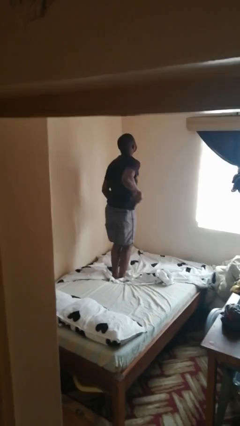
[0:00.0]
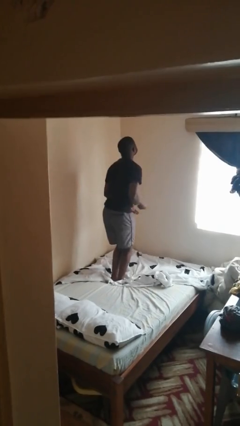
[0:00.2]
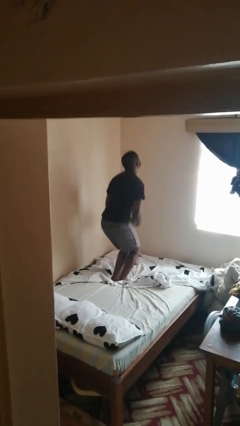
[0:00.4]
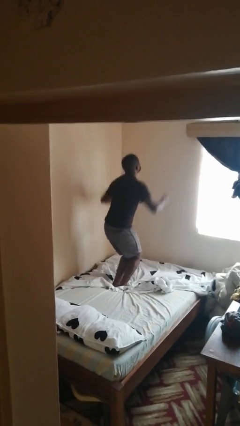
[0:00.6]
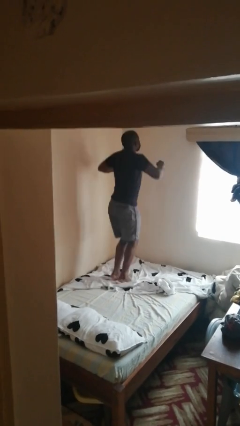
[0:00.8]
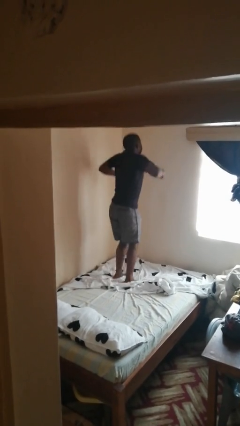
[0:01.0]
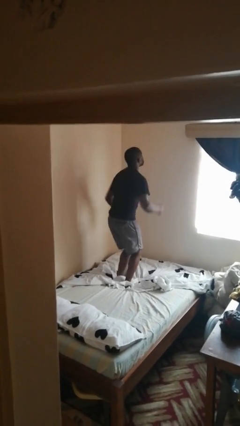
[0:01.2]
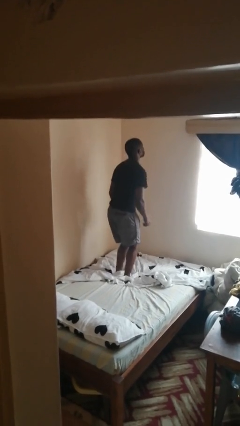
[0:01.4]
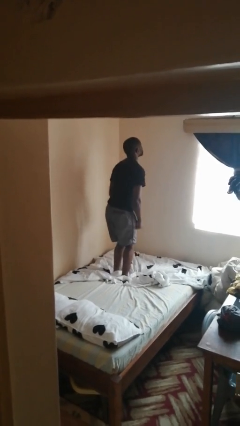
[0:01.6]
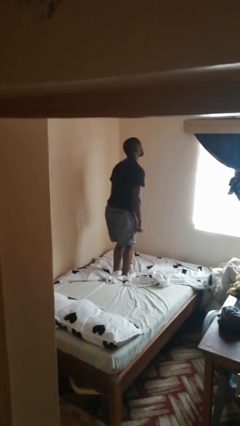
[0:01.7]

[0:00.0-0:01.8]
person jumps on bed

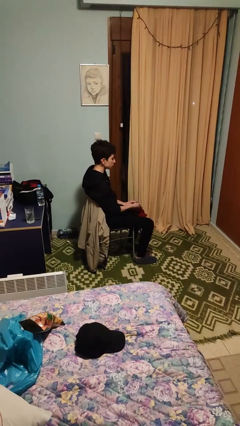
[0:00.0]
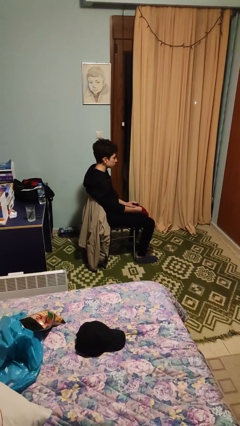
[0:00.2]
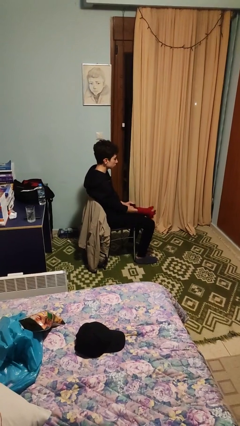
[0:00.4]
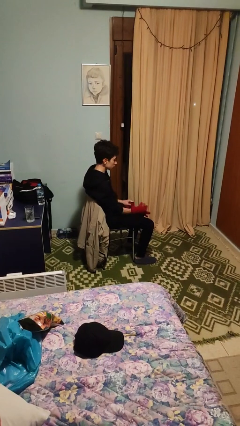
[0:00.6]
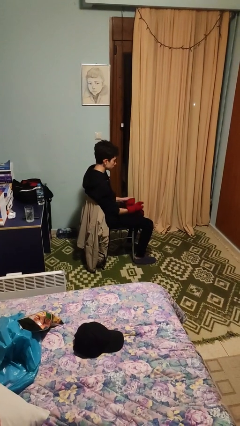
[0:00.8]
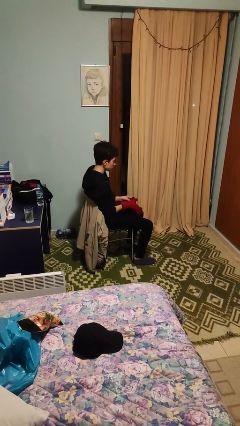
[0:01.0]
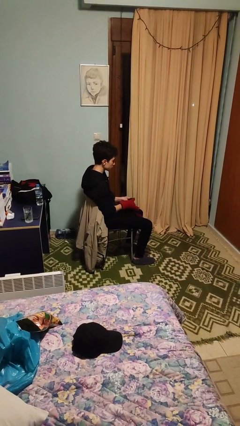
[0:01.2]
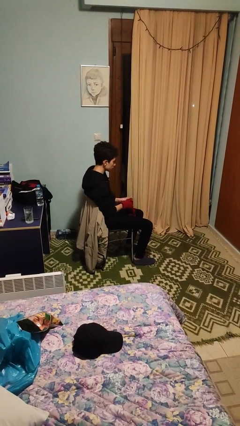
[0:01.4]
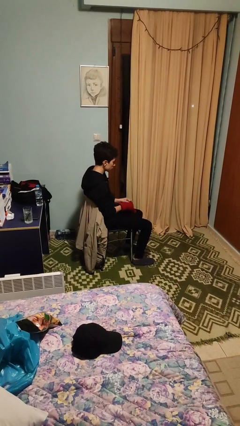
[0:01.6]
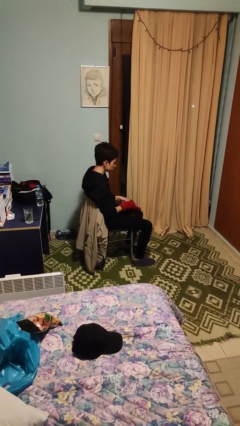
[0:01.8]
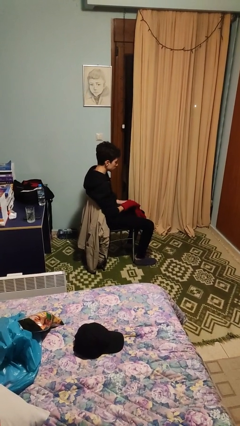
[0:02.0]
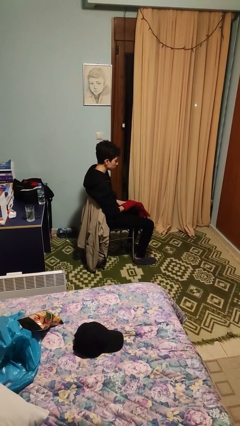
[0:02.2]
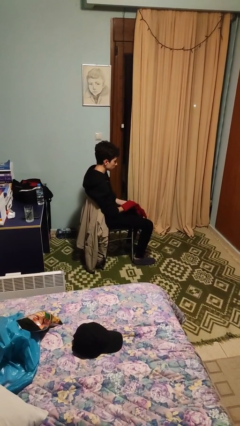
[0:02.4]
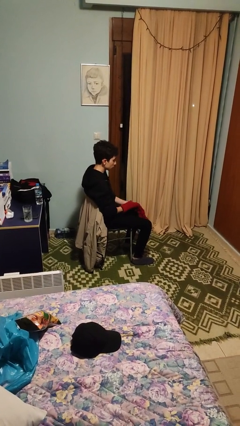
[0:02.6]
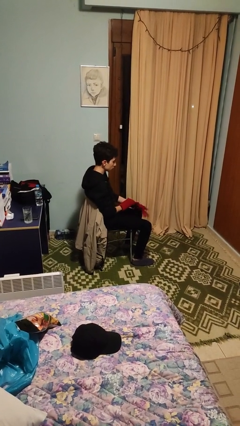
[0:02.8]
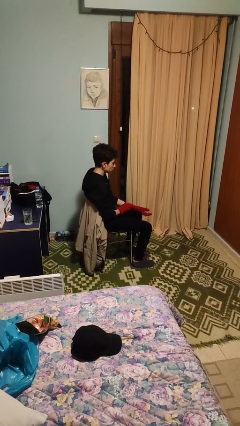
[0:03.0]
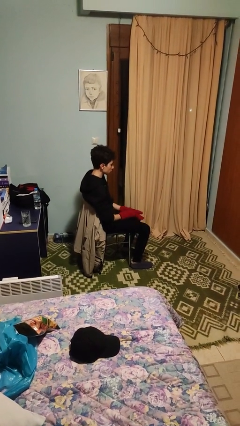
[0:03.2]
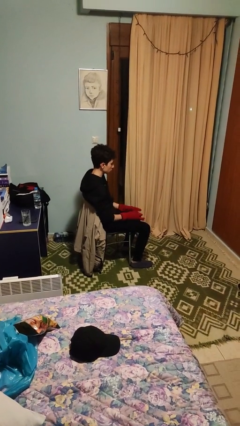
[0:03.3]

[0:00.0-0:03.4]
person puts on gloves

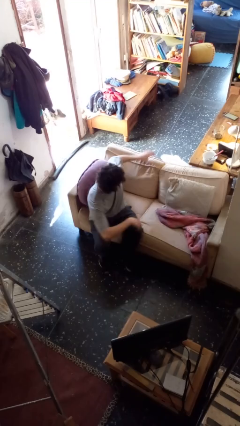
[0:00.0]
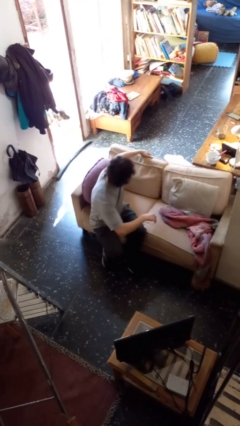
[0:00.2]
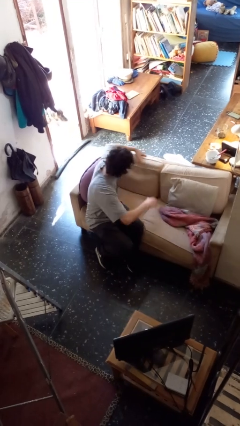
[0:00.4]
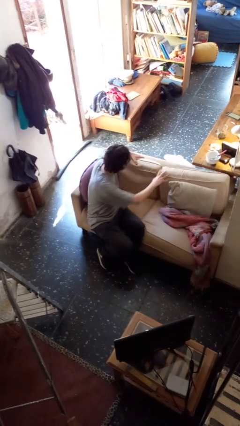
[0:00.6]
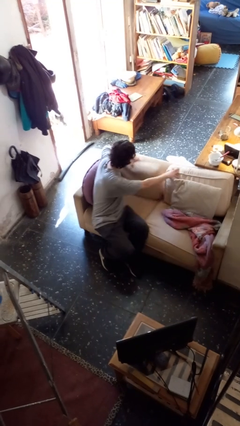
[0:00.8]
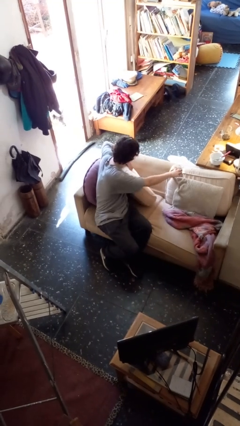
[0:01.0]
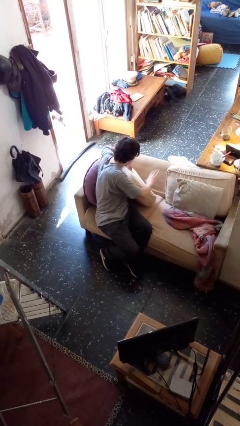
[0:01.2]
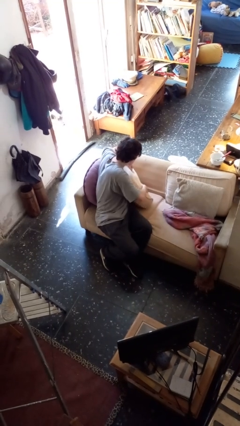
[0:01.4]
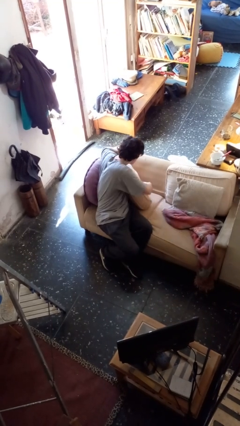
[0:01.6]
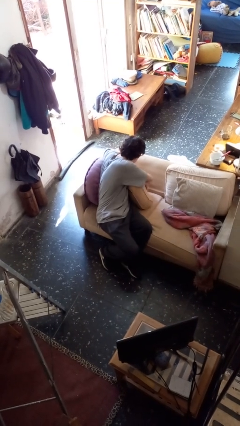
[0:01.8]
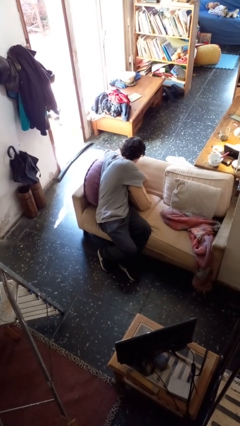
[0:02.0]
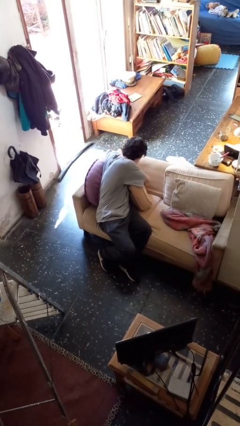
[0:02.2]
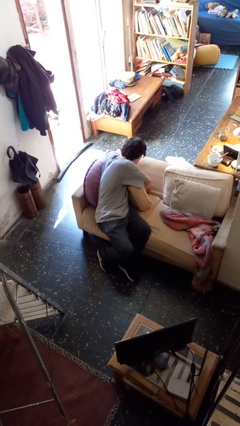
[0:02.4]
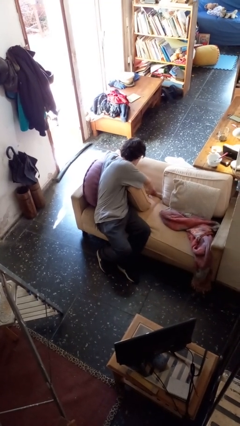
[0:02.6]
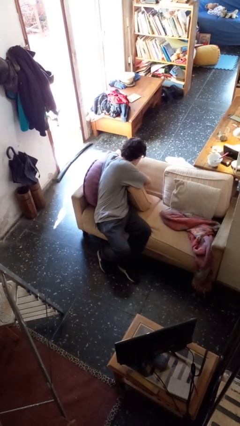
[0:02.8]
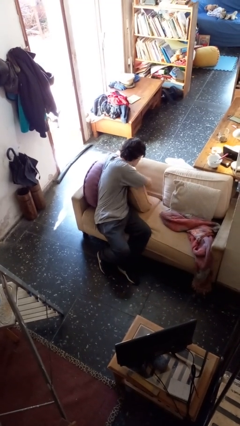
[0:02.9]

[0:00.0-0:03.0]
person searches in couch

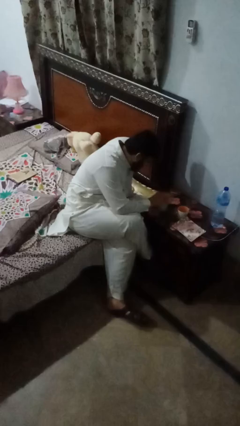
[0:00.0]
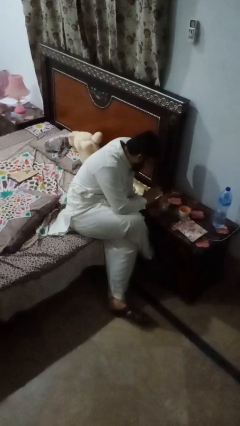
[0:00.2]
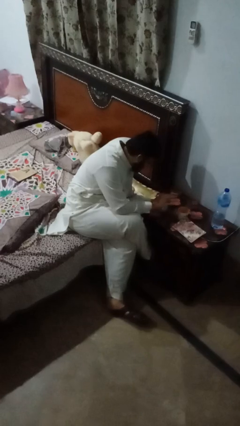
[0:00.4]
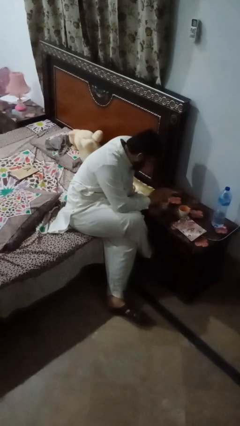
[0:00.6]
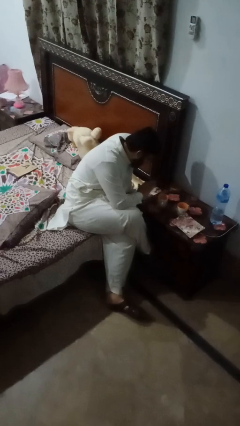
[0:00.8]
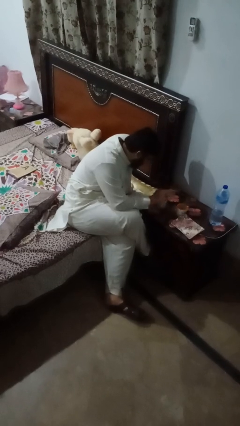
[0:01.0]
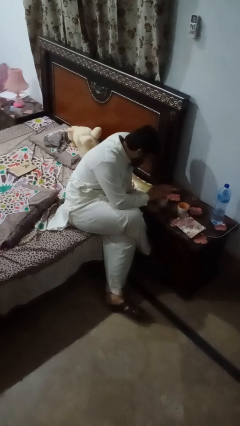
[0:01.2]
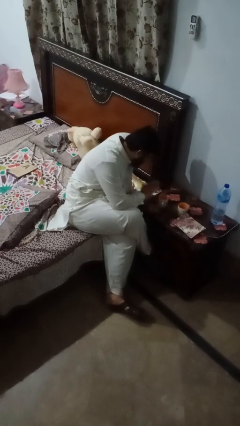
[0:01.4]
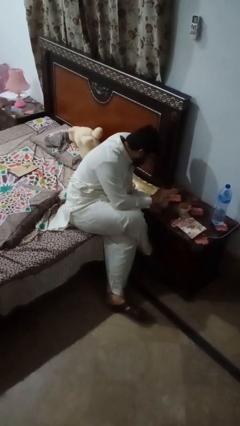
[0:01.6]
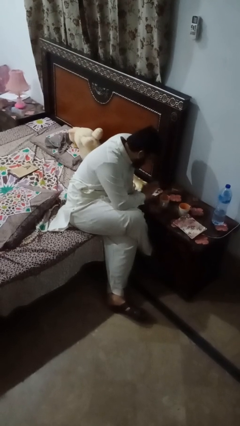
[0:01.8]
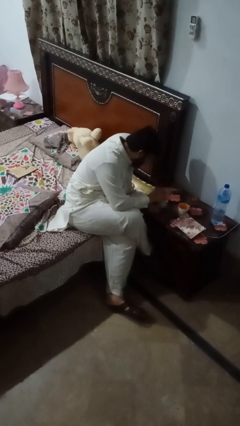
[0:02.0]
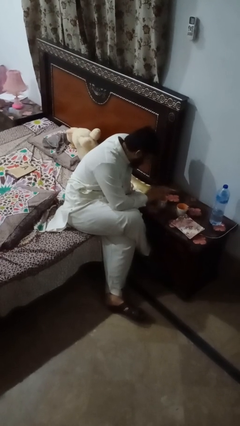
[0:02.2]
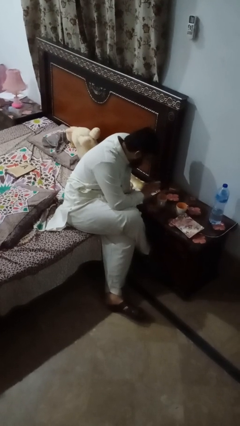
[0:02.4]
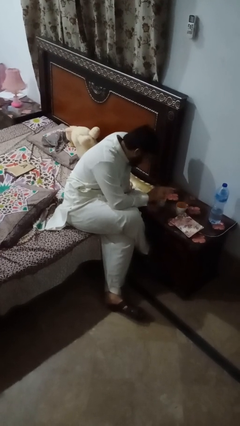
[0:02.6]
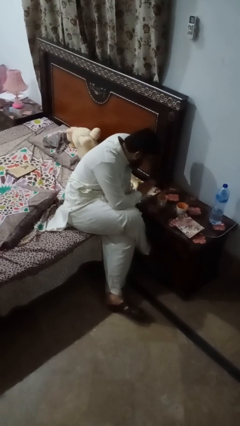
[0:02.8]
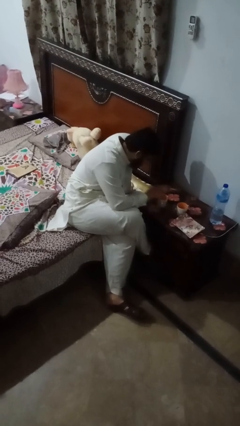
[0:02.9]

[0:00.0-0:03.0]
person waves hand over object

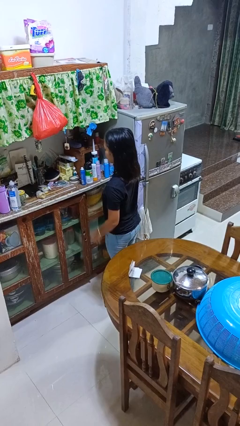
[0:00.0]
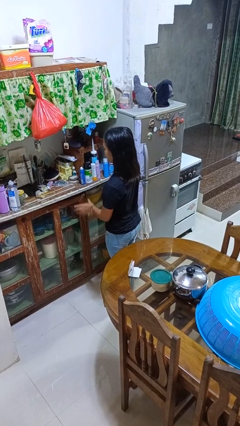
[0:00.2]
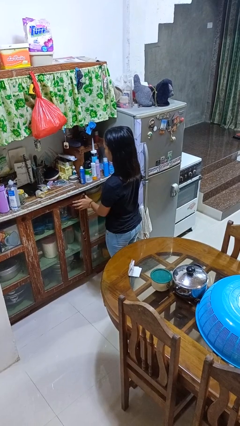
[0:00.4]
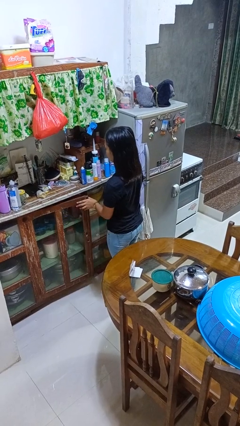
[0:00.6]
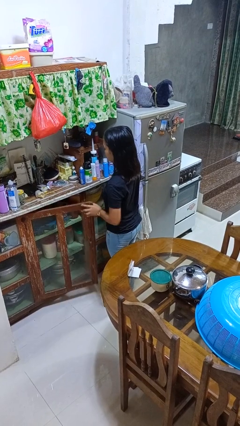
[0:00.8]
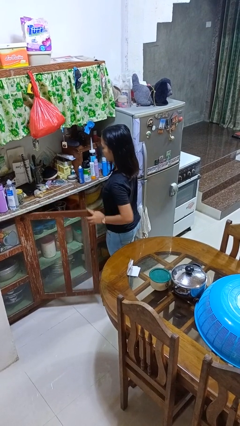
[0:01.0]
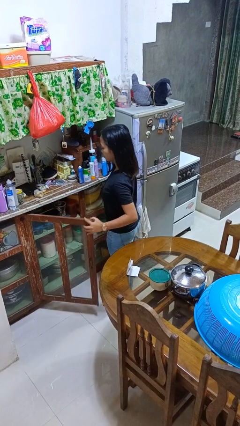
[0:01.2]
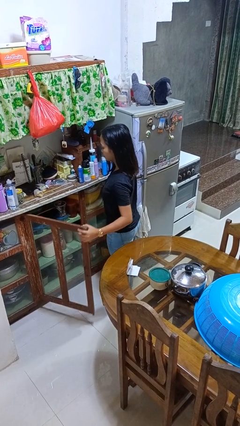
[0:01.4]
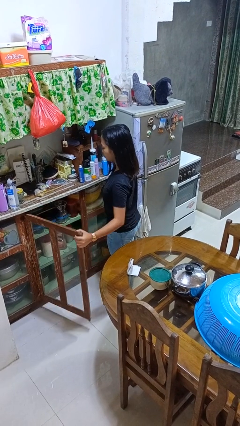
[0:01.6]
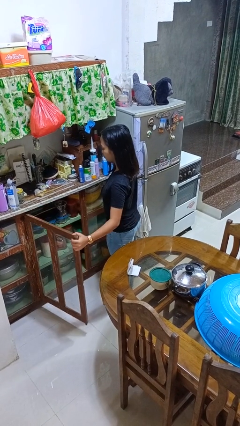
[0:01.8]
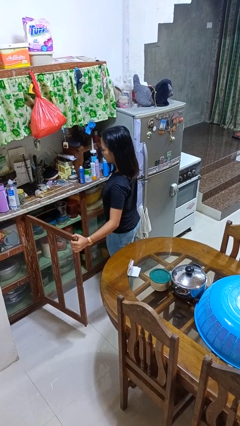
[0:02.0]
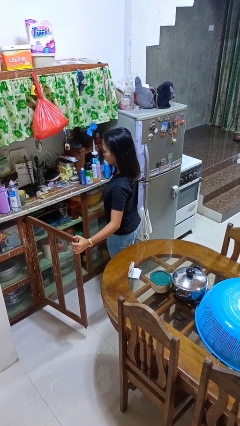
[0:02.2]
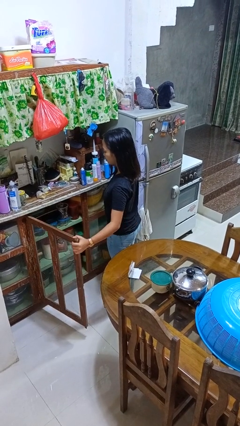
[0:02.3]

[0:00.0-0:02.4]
person opens cabinet

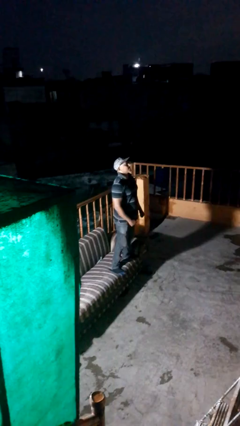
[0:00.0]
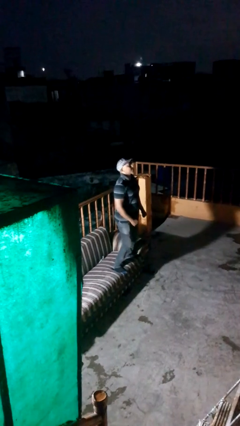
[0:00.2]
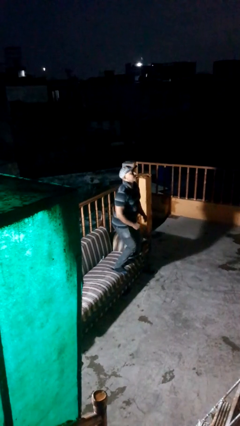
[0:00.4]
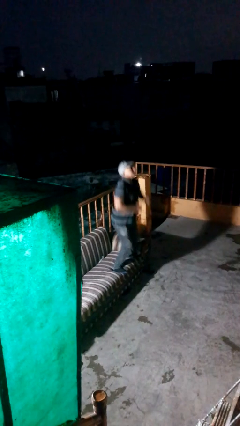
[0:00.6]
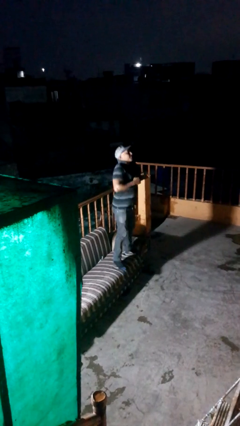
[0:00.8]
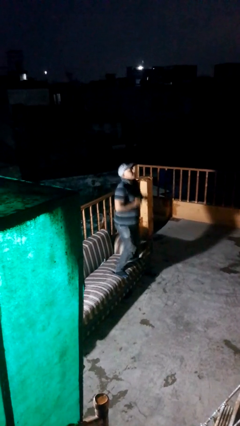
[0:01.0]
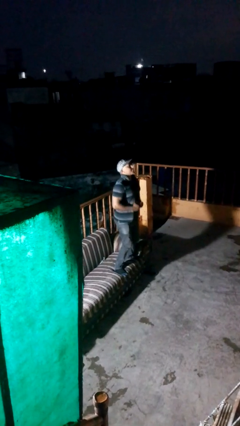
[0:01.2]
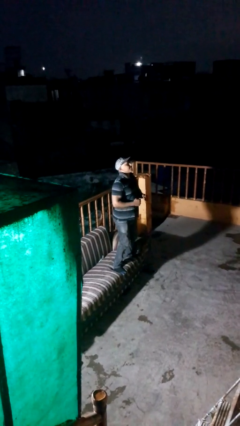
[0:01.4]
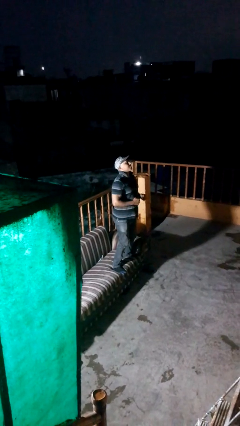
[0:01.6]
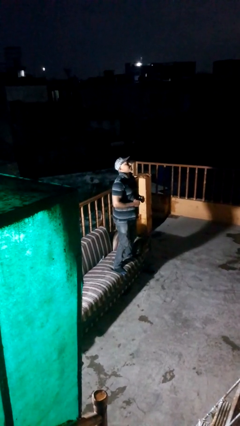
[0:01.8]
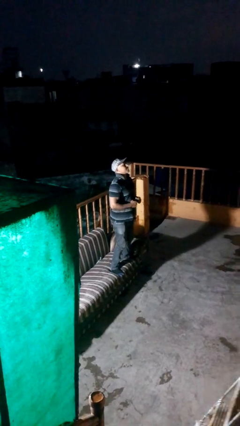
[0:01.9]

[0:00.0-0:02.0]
person jumps on couch

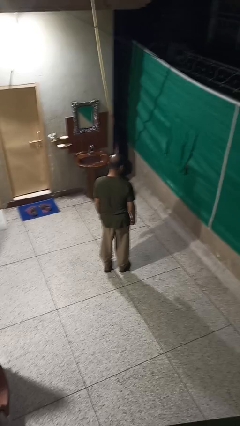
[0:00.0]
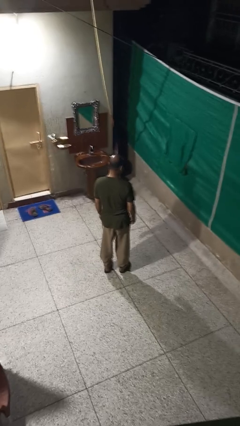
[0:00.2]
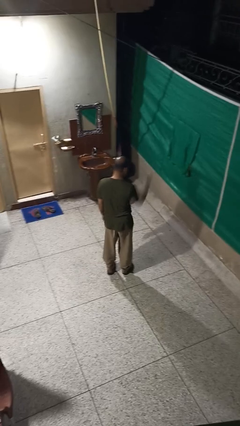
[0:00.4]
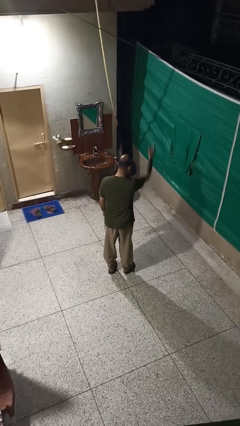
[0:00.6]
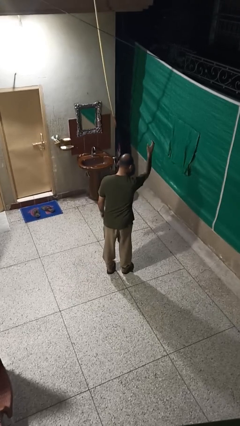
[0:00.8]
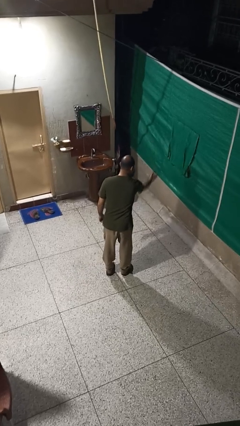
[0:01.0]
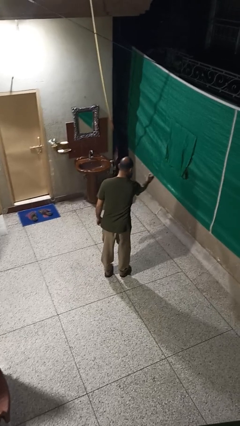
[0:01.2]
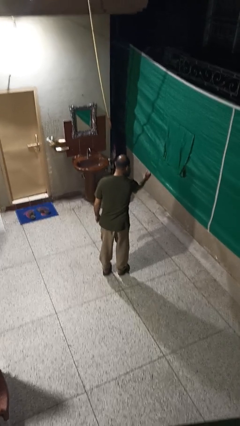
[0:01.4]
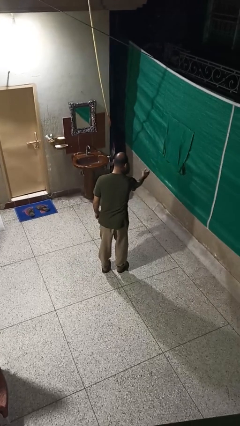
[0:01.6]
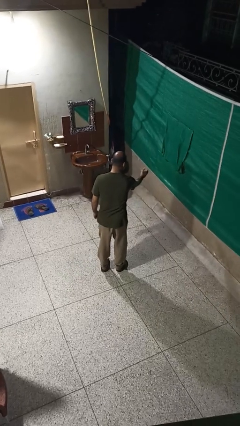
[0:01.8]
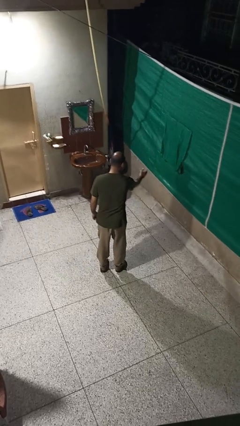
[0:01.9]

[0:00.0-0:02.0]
person karate chop
